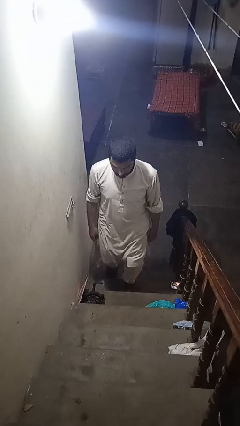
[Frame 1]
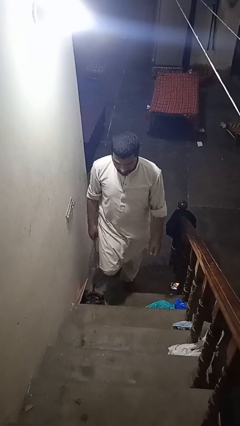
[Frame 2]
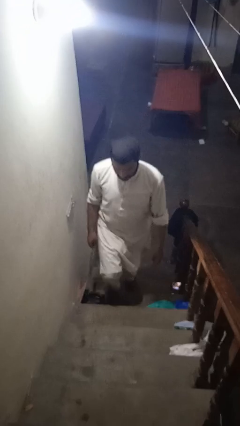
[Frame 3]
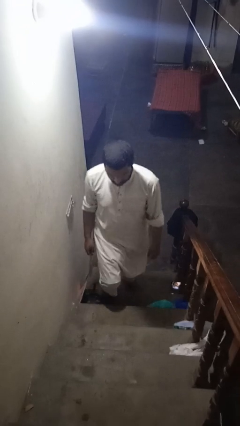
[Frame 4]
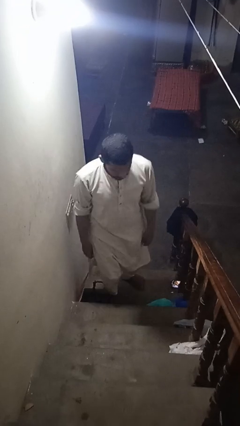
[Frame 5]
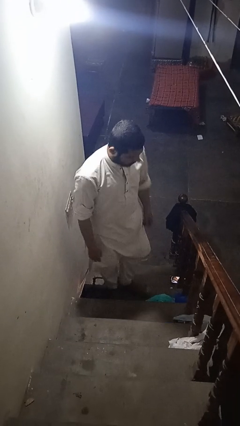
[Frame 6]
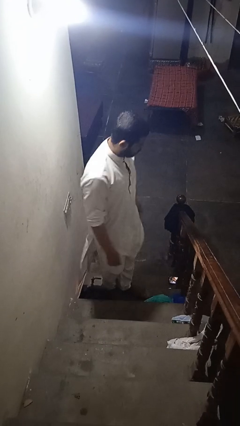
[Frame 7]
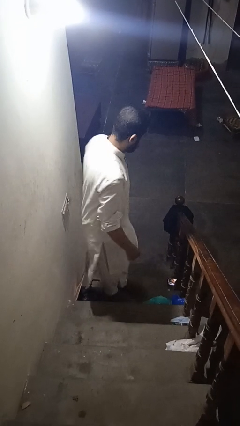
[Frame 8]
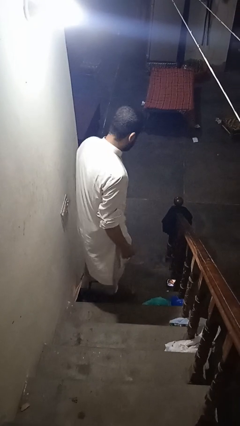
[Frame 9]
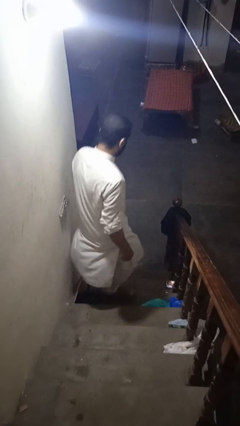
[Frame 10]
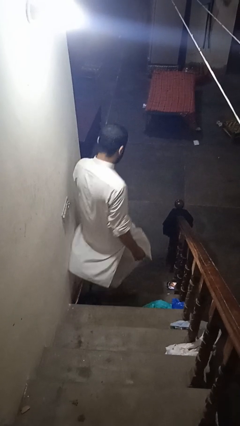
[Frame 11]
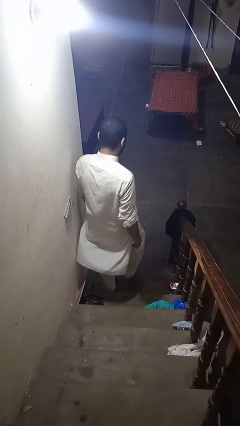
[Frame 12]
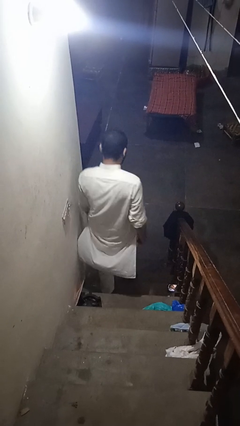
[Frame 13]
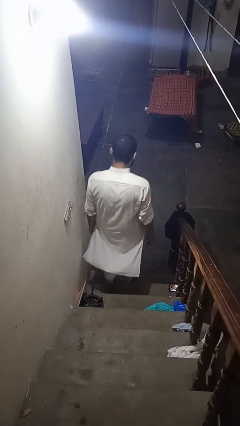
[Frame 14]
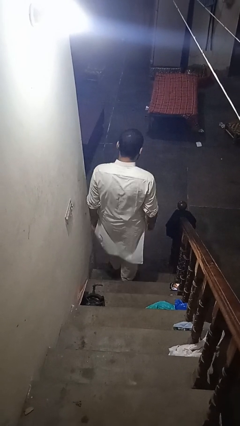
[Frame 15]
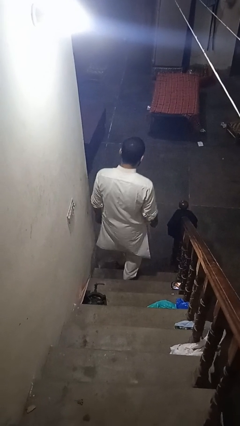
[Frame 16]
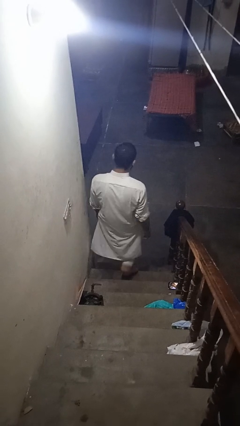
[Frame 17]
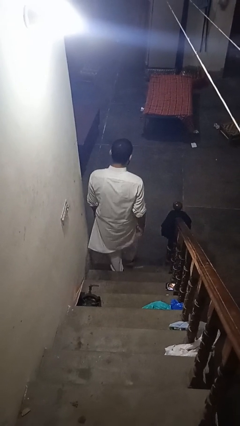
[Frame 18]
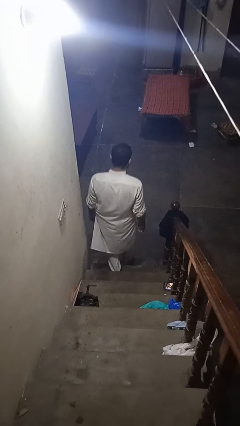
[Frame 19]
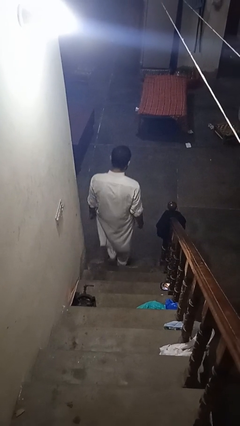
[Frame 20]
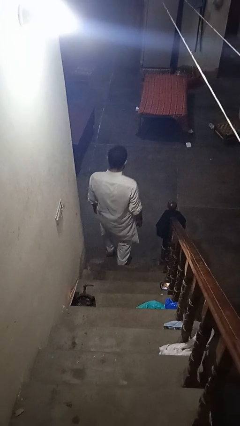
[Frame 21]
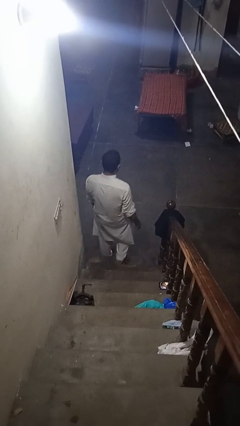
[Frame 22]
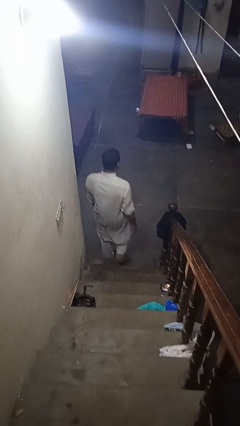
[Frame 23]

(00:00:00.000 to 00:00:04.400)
person climbs down stairs

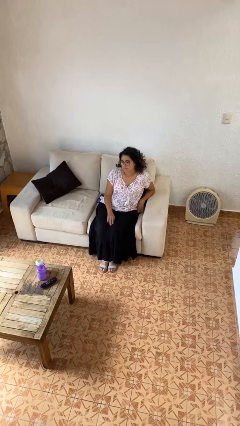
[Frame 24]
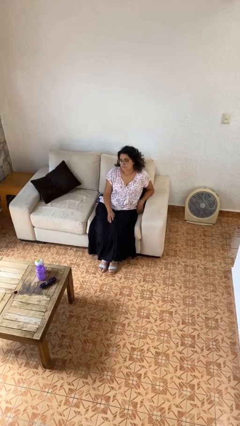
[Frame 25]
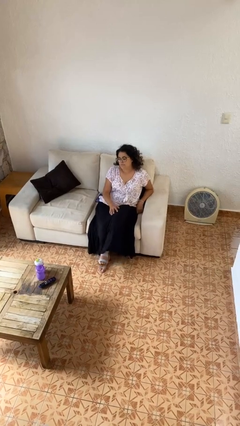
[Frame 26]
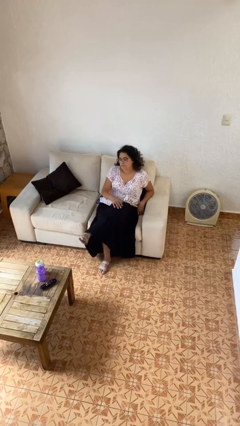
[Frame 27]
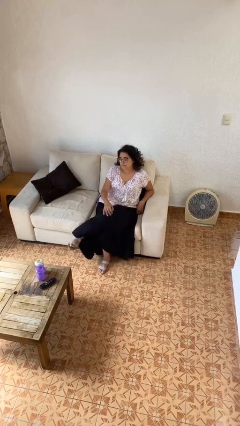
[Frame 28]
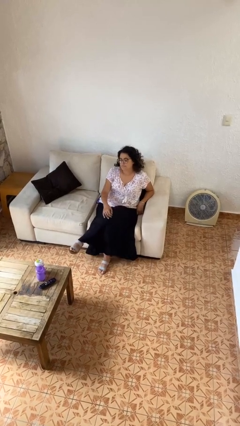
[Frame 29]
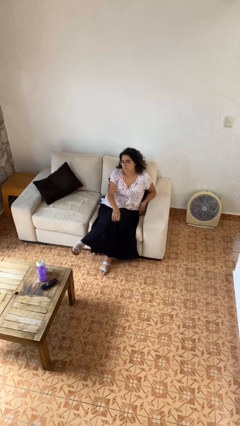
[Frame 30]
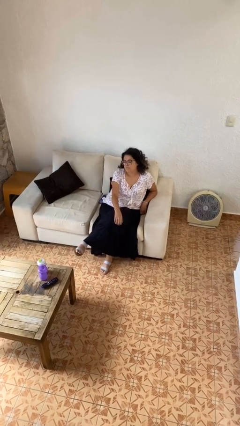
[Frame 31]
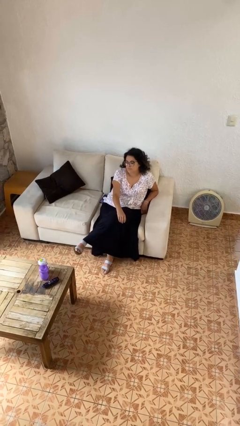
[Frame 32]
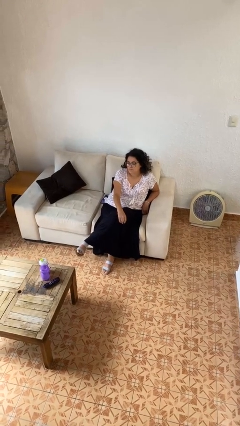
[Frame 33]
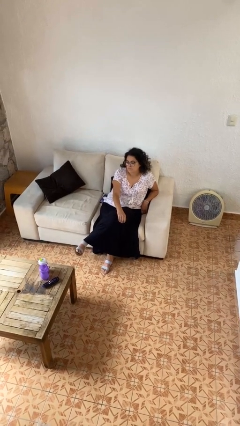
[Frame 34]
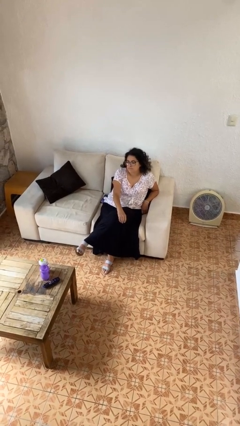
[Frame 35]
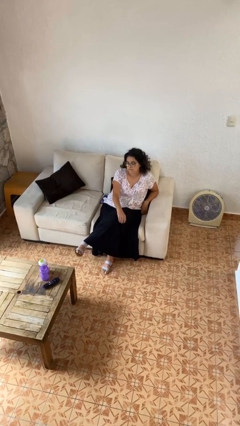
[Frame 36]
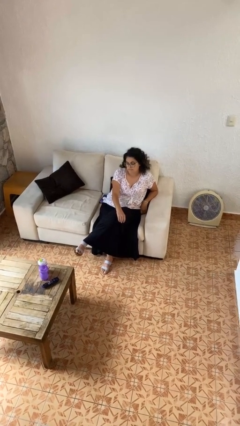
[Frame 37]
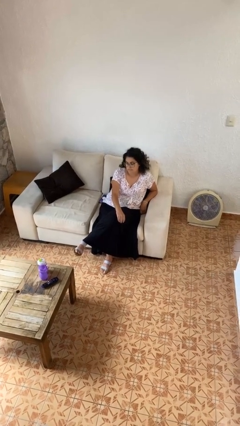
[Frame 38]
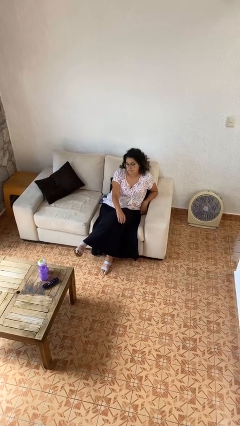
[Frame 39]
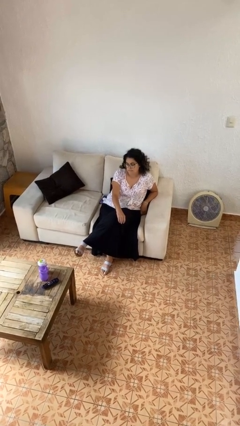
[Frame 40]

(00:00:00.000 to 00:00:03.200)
person crosses legs

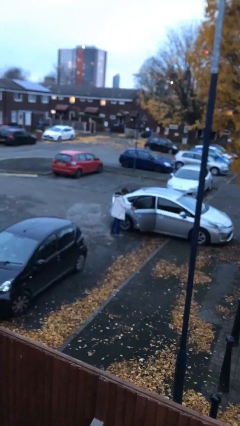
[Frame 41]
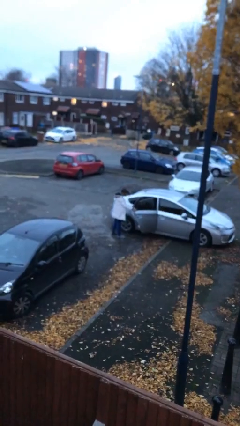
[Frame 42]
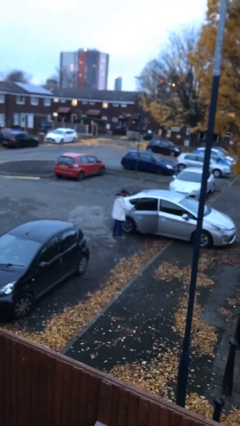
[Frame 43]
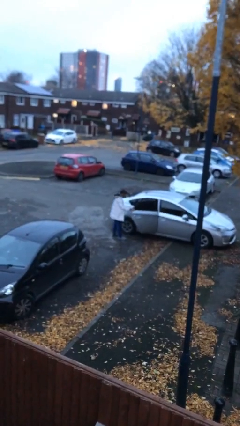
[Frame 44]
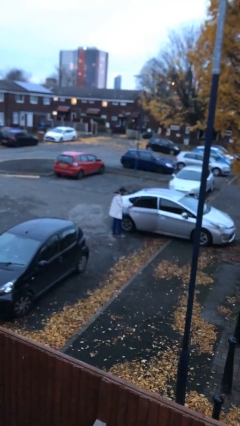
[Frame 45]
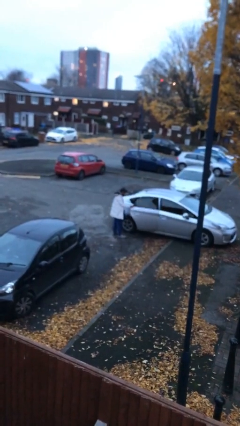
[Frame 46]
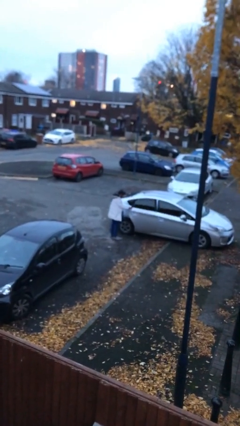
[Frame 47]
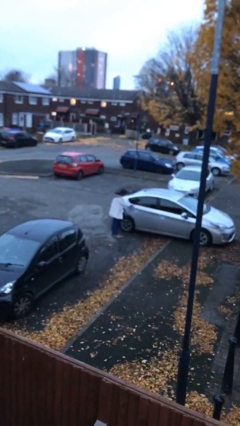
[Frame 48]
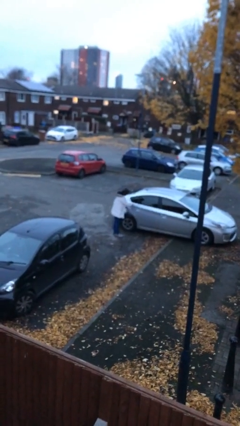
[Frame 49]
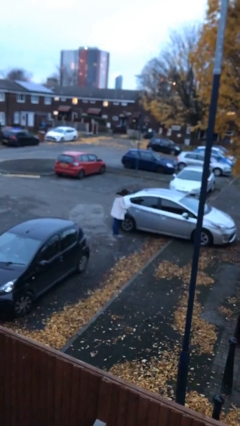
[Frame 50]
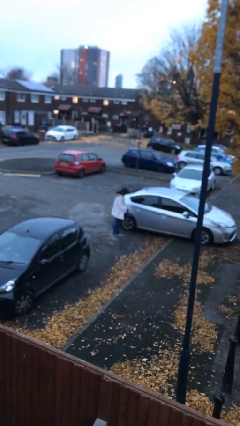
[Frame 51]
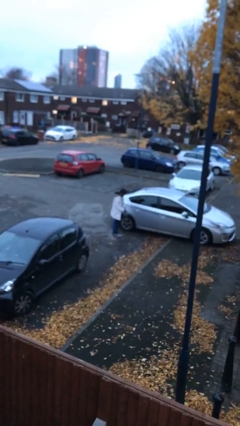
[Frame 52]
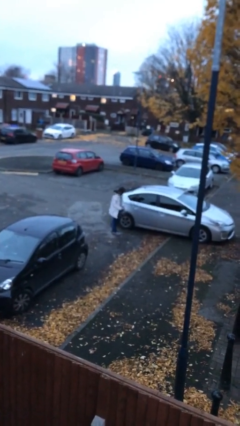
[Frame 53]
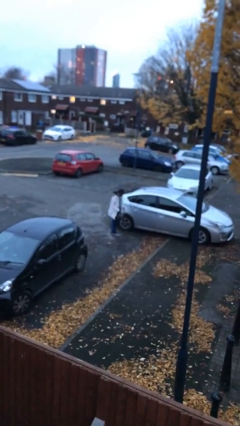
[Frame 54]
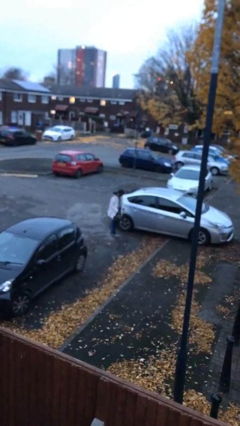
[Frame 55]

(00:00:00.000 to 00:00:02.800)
person closes car door

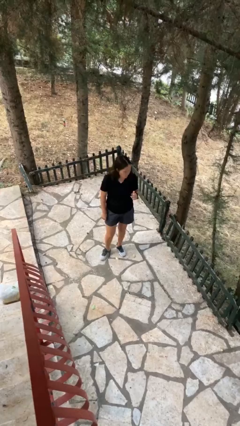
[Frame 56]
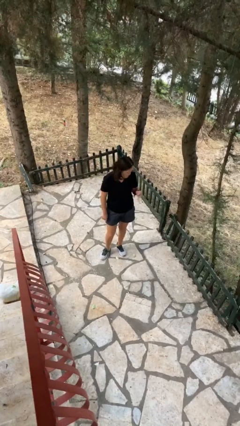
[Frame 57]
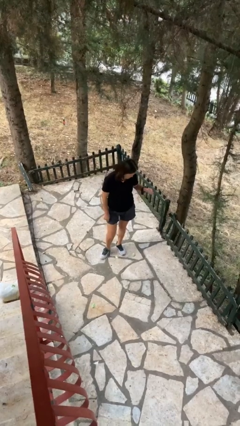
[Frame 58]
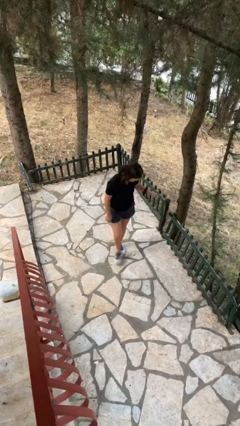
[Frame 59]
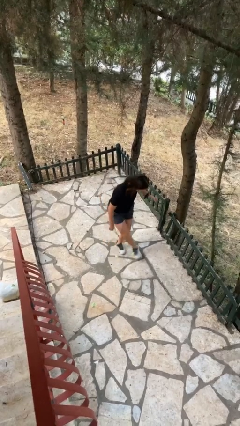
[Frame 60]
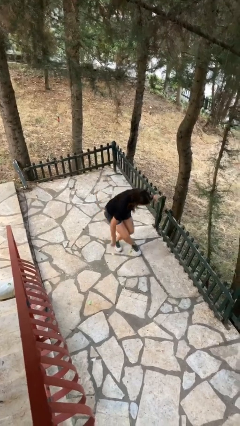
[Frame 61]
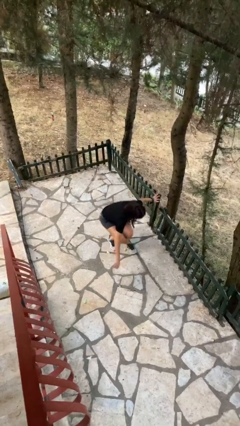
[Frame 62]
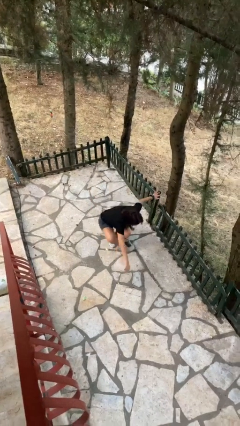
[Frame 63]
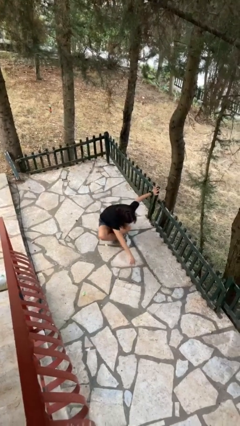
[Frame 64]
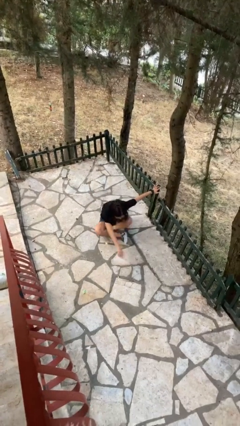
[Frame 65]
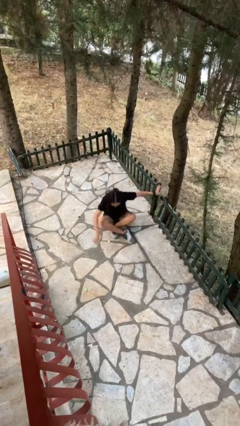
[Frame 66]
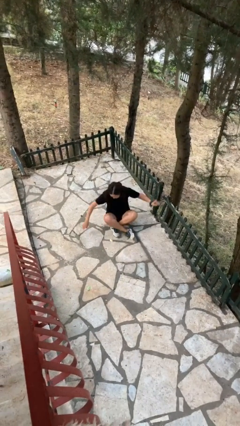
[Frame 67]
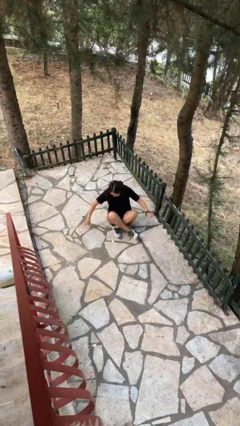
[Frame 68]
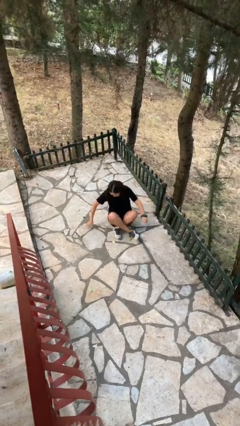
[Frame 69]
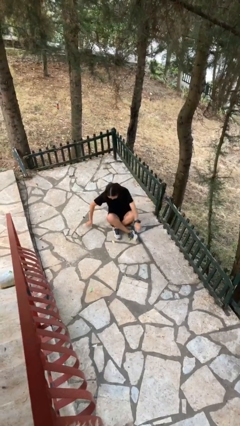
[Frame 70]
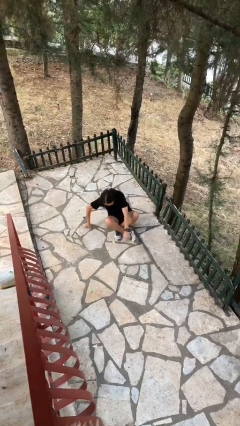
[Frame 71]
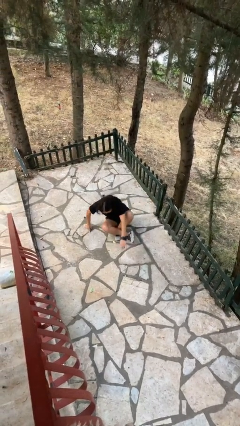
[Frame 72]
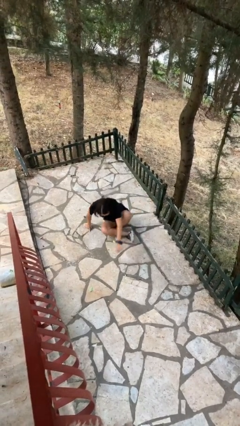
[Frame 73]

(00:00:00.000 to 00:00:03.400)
person sits crisscross

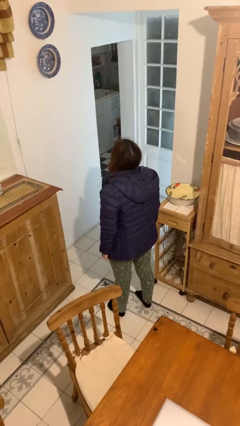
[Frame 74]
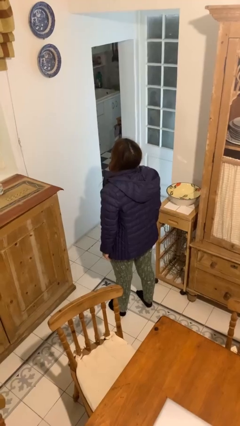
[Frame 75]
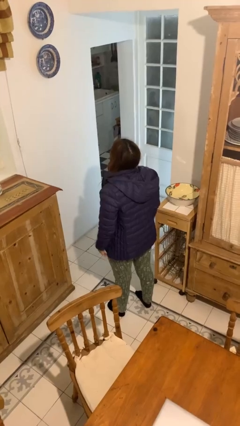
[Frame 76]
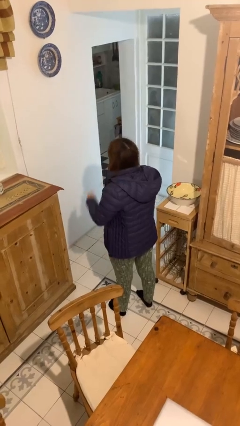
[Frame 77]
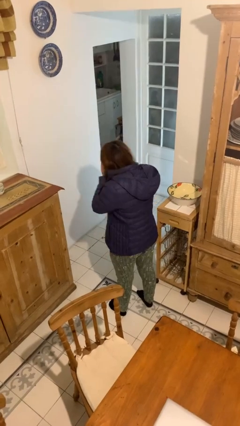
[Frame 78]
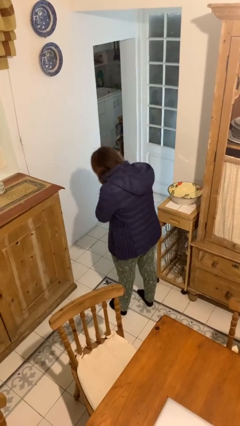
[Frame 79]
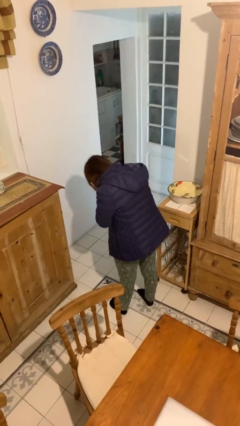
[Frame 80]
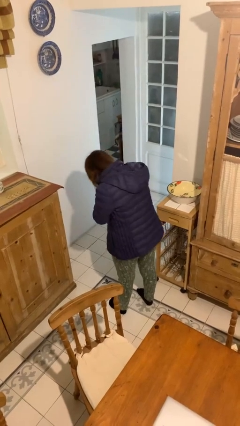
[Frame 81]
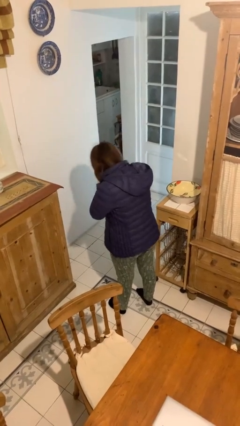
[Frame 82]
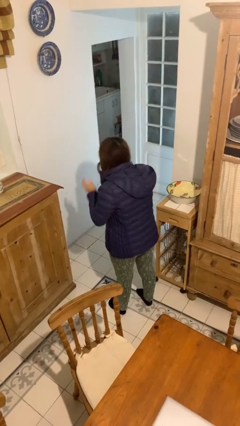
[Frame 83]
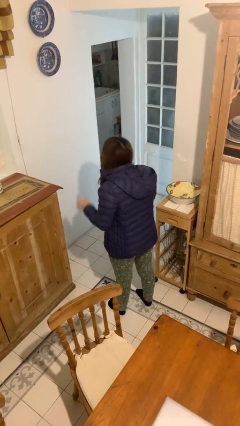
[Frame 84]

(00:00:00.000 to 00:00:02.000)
person sneezes into hand

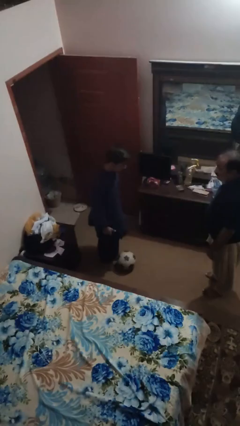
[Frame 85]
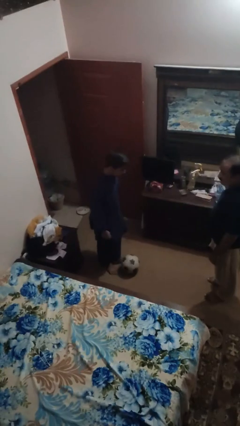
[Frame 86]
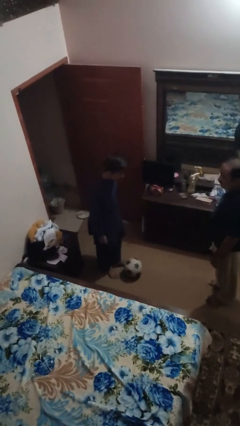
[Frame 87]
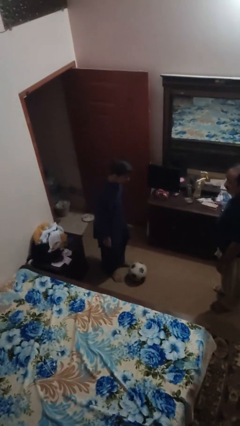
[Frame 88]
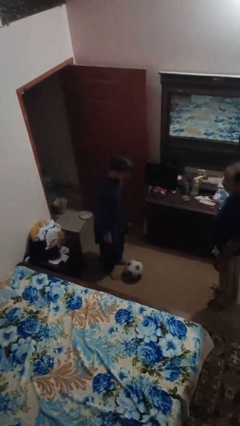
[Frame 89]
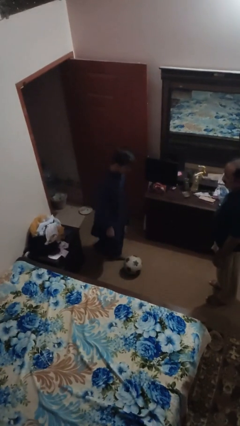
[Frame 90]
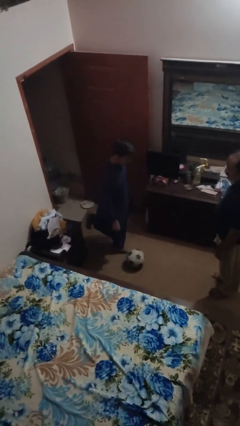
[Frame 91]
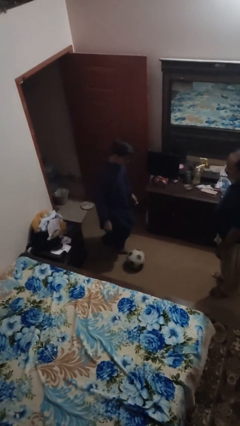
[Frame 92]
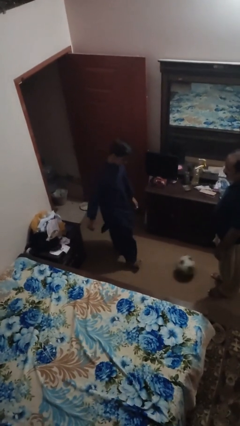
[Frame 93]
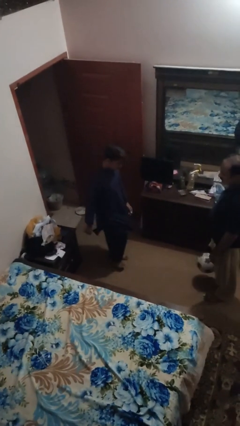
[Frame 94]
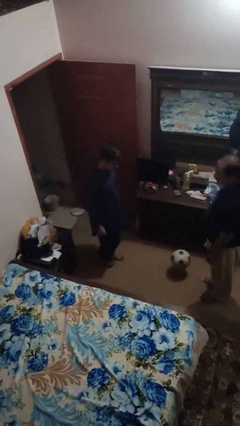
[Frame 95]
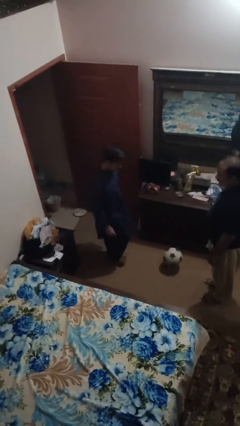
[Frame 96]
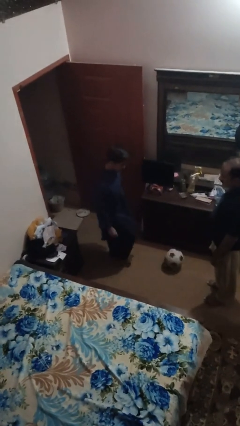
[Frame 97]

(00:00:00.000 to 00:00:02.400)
person kicks object to person
